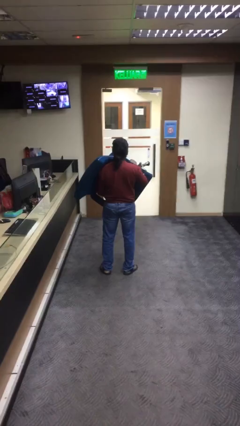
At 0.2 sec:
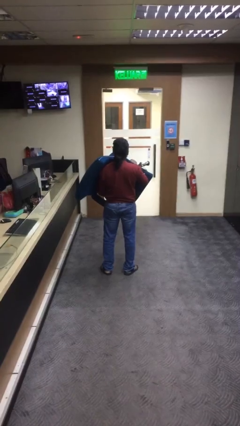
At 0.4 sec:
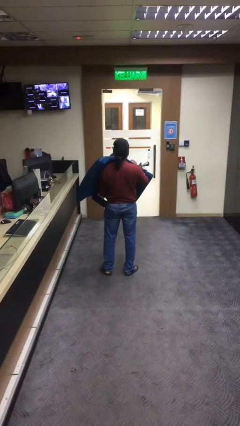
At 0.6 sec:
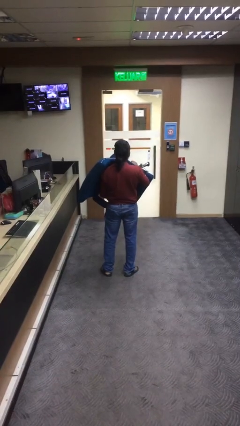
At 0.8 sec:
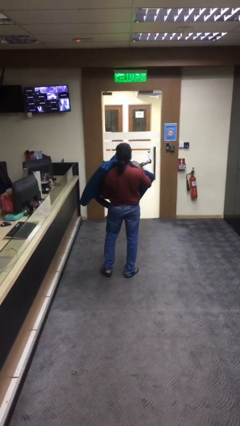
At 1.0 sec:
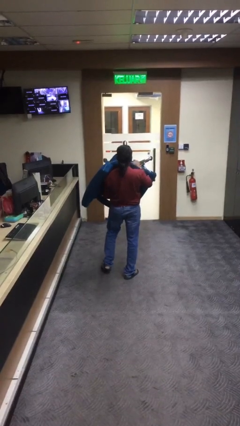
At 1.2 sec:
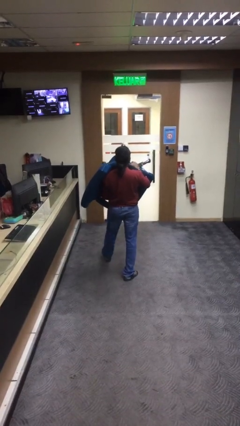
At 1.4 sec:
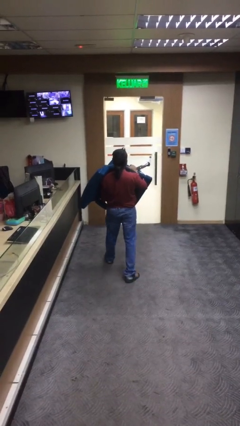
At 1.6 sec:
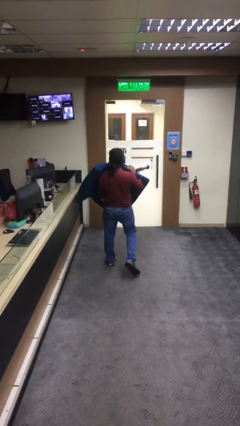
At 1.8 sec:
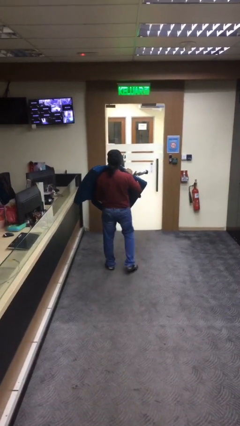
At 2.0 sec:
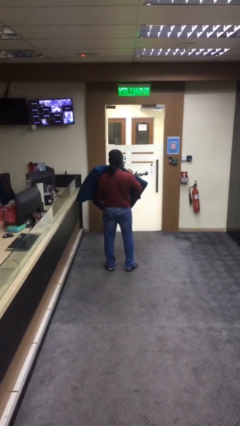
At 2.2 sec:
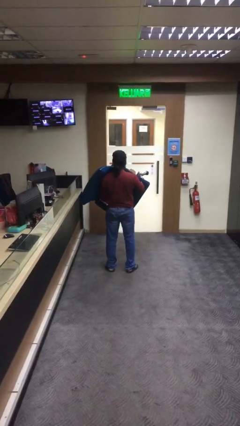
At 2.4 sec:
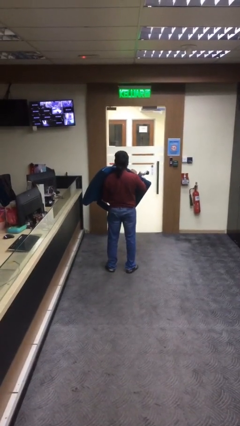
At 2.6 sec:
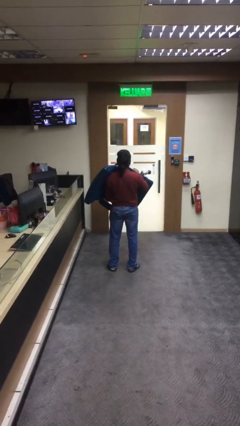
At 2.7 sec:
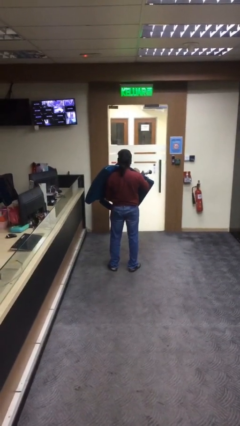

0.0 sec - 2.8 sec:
person carries furniture

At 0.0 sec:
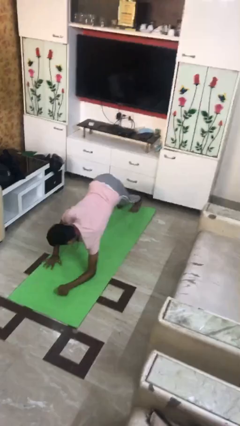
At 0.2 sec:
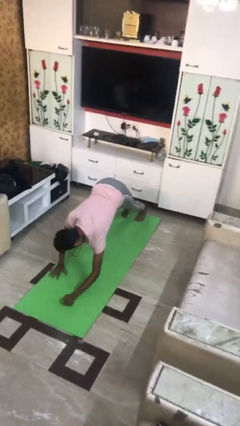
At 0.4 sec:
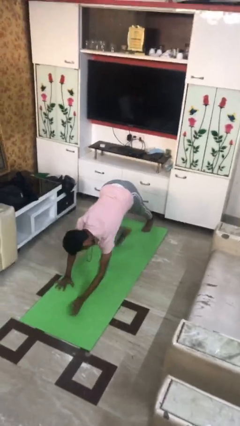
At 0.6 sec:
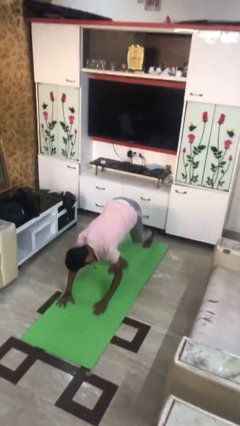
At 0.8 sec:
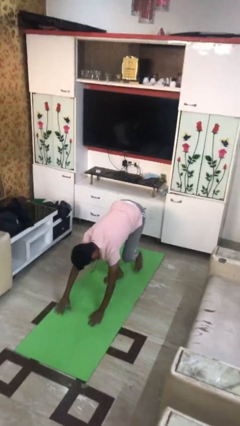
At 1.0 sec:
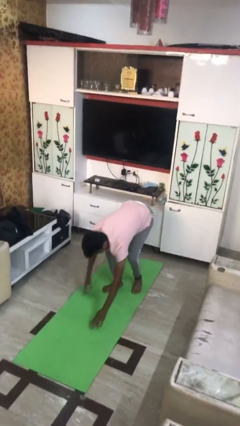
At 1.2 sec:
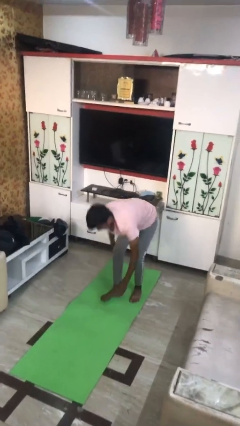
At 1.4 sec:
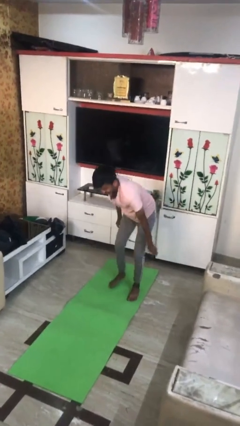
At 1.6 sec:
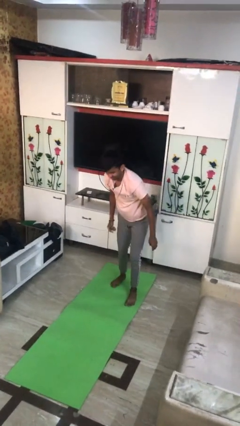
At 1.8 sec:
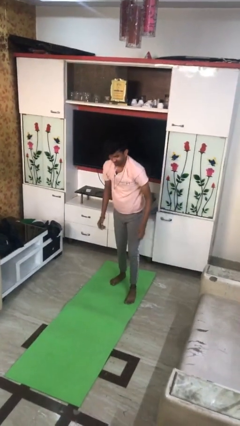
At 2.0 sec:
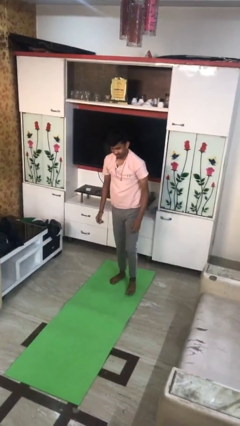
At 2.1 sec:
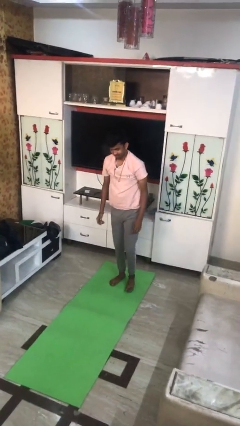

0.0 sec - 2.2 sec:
person stands up from floor

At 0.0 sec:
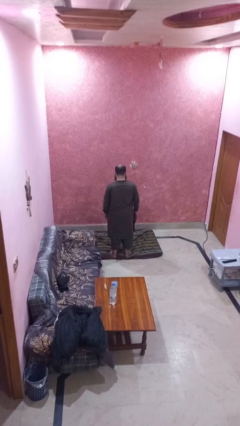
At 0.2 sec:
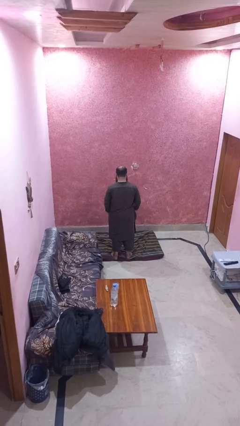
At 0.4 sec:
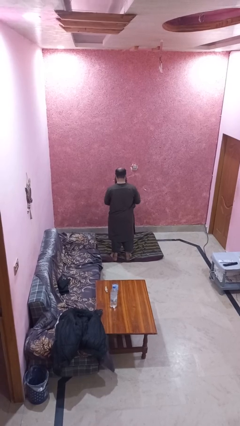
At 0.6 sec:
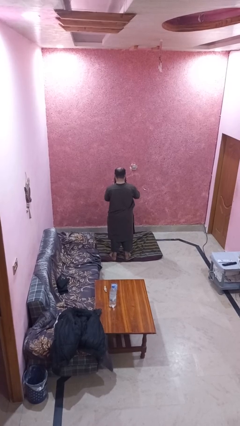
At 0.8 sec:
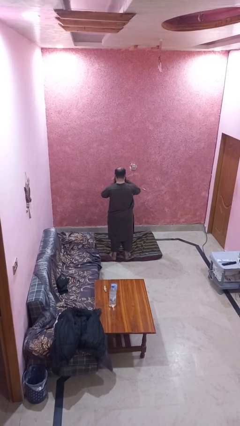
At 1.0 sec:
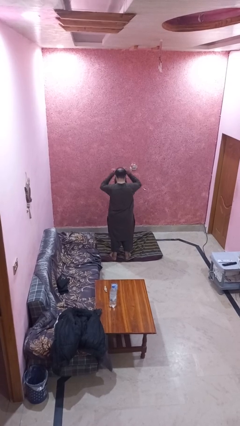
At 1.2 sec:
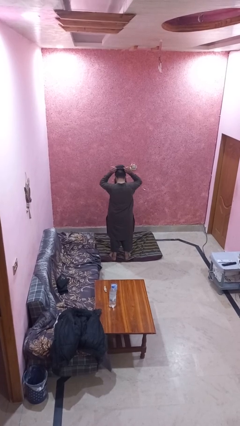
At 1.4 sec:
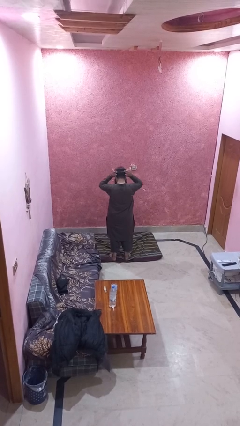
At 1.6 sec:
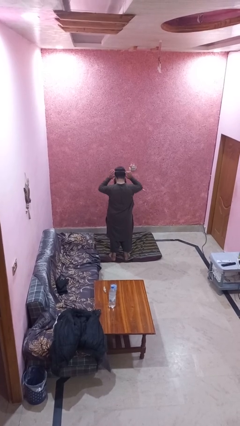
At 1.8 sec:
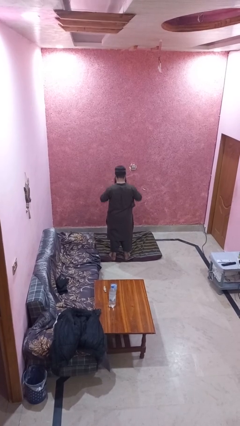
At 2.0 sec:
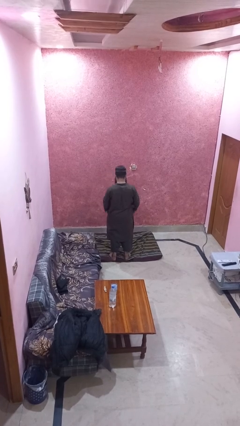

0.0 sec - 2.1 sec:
person puts on hat

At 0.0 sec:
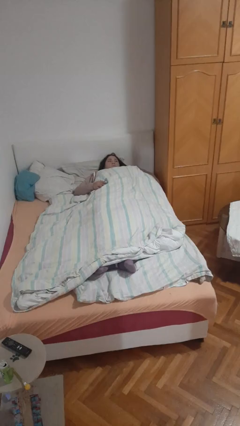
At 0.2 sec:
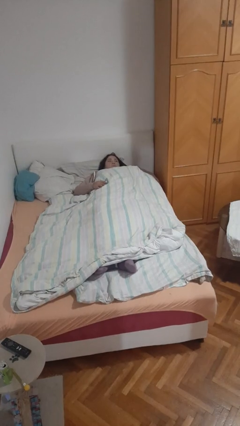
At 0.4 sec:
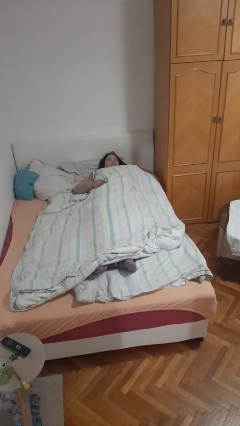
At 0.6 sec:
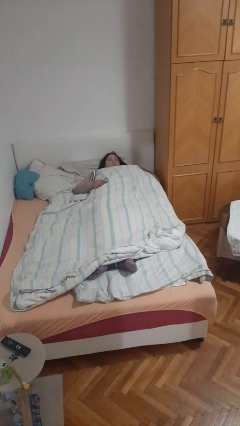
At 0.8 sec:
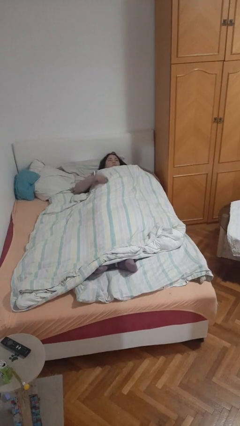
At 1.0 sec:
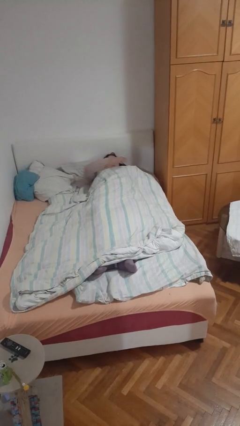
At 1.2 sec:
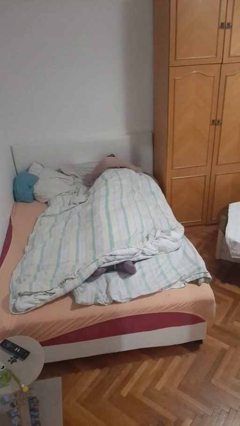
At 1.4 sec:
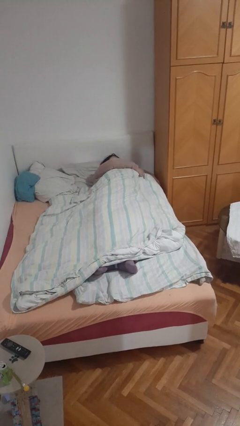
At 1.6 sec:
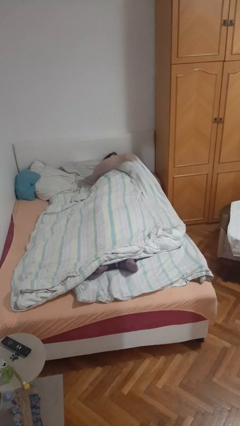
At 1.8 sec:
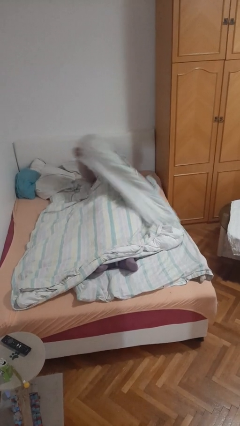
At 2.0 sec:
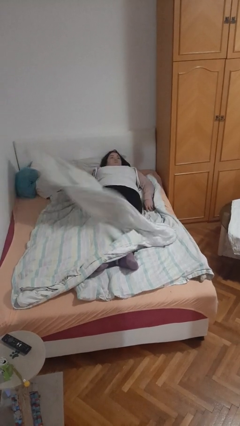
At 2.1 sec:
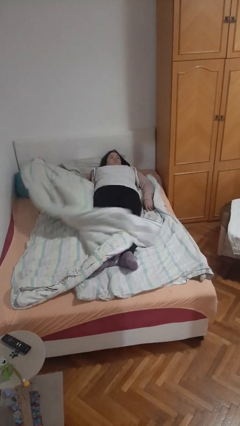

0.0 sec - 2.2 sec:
person uncovers with bedsheets

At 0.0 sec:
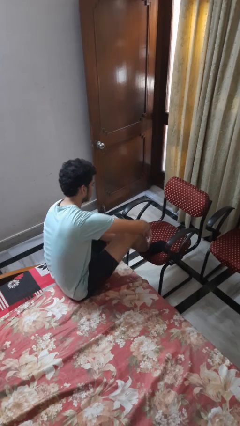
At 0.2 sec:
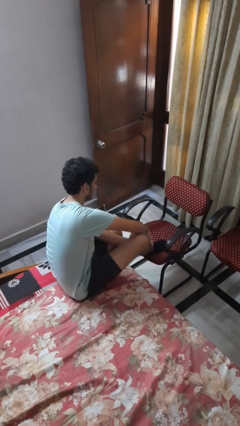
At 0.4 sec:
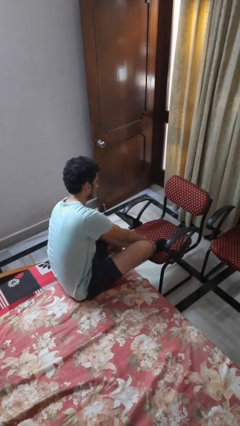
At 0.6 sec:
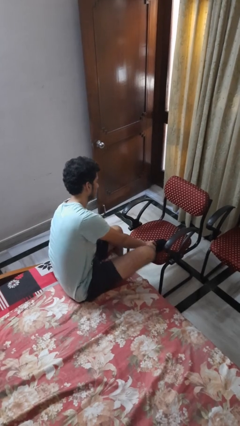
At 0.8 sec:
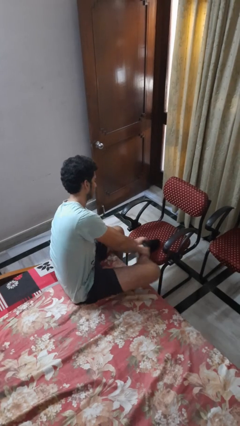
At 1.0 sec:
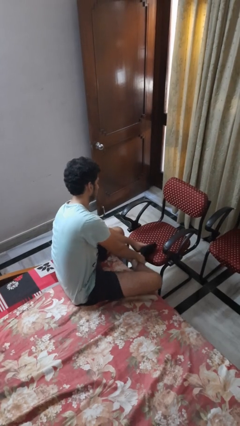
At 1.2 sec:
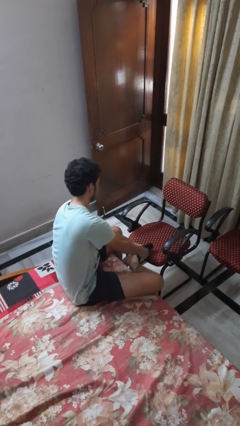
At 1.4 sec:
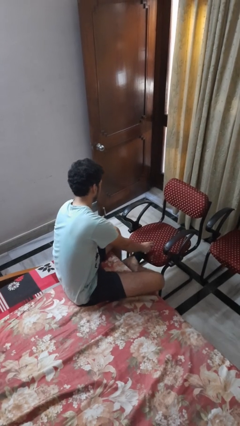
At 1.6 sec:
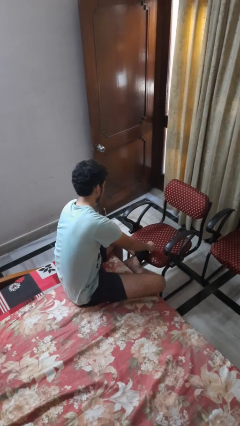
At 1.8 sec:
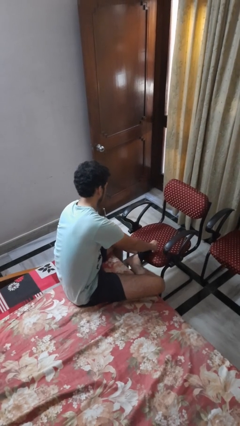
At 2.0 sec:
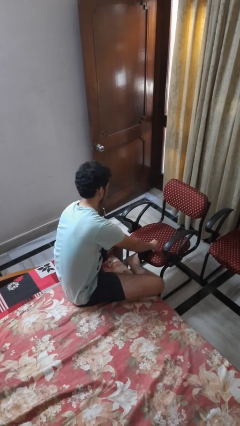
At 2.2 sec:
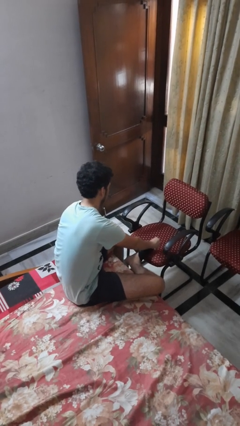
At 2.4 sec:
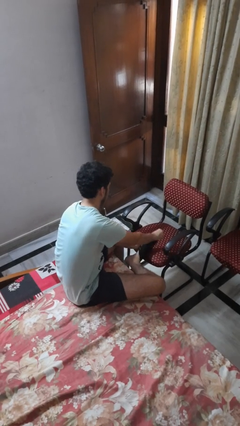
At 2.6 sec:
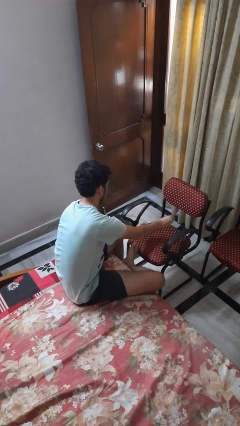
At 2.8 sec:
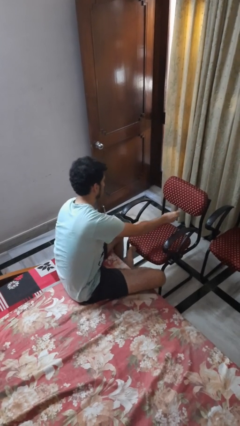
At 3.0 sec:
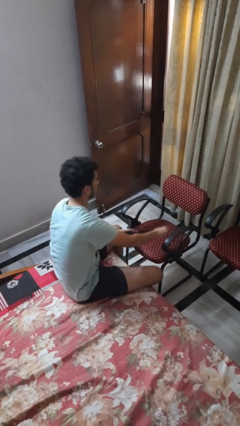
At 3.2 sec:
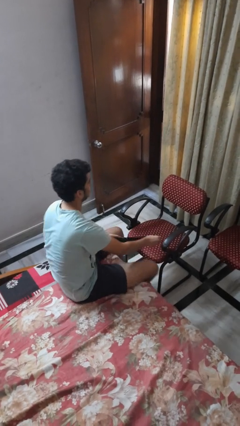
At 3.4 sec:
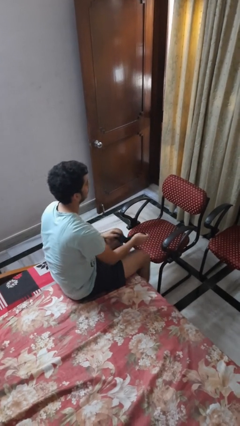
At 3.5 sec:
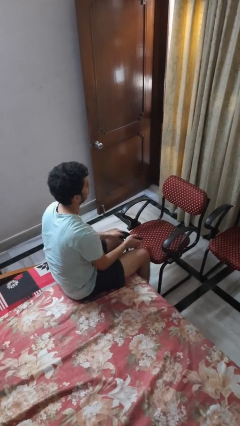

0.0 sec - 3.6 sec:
person takes off socks

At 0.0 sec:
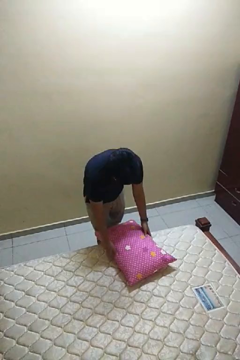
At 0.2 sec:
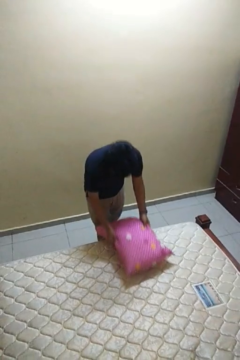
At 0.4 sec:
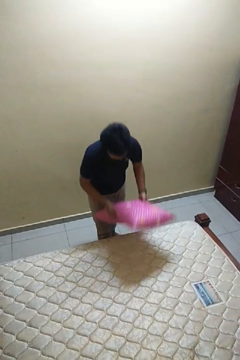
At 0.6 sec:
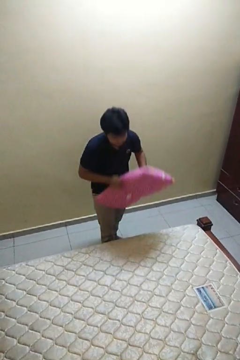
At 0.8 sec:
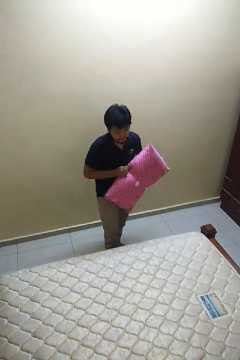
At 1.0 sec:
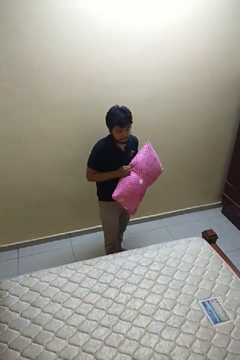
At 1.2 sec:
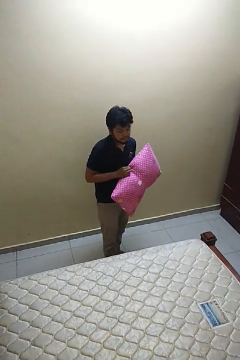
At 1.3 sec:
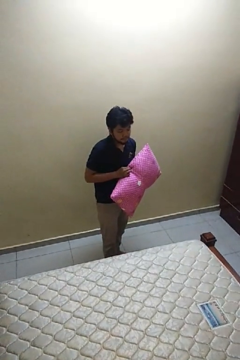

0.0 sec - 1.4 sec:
person picks up object from bed

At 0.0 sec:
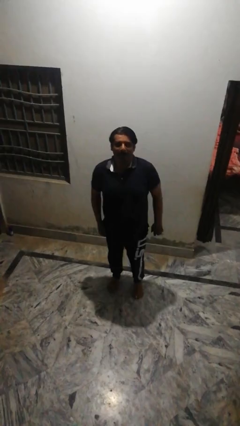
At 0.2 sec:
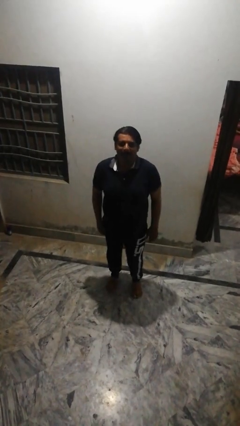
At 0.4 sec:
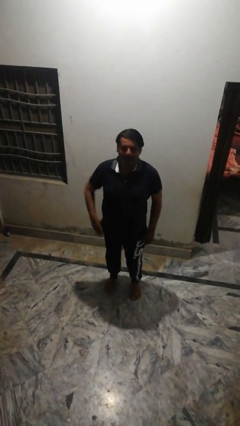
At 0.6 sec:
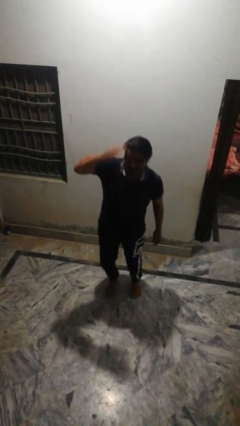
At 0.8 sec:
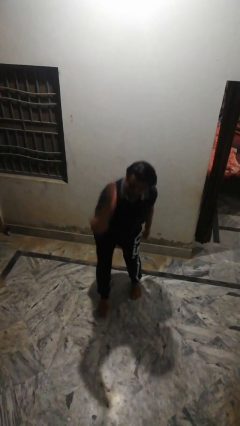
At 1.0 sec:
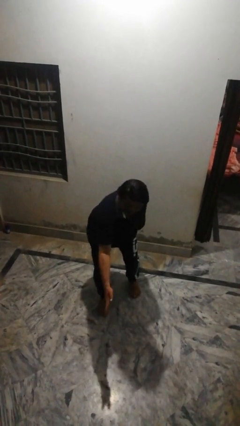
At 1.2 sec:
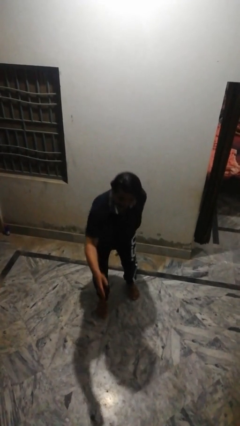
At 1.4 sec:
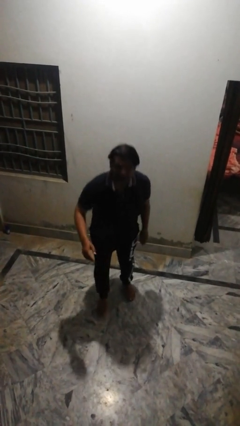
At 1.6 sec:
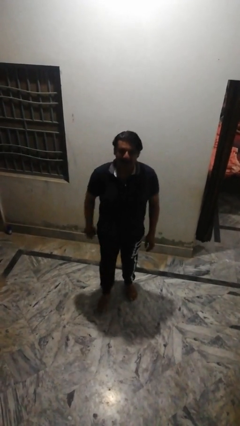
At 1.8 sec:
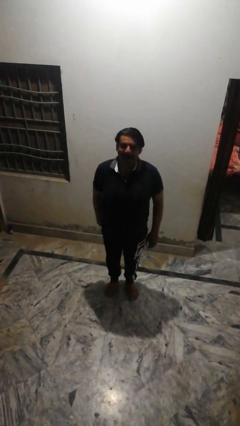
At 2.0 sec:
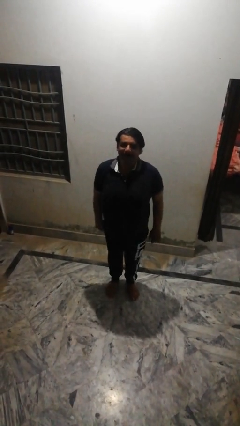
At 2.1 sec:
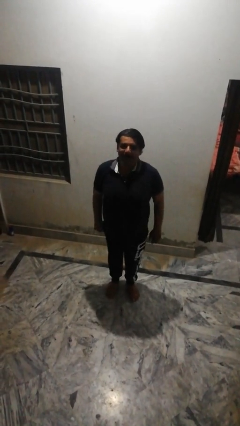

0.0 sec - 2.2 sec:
person karate chop

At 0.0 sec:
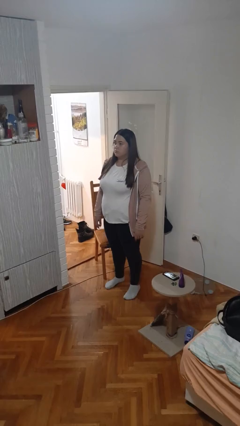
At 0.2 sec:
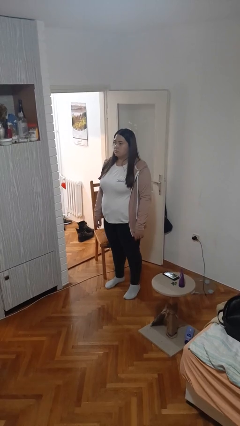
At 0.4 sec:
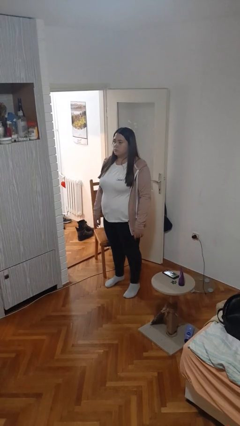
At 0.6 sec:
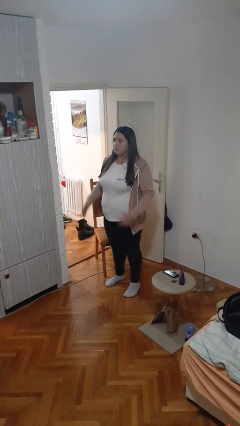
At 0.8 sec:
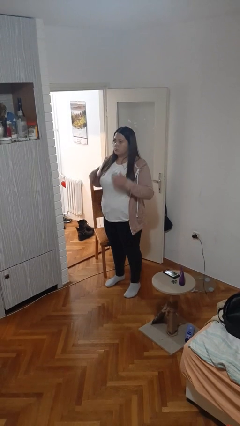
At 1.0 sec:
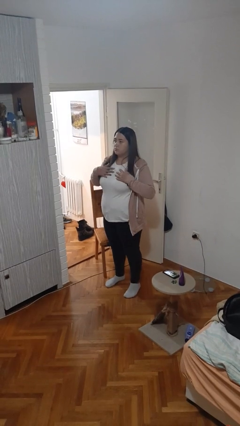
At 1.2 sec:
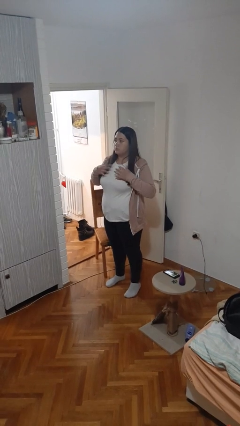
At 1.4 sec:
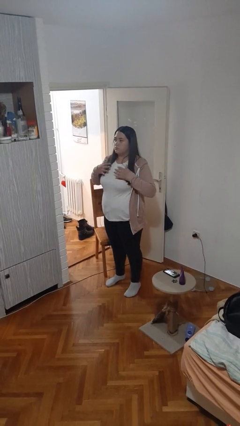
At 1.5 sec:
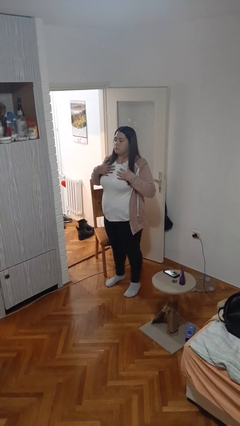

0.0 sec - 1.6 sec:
person drums on chest
